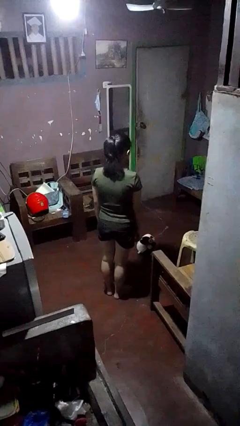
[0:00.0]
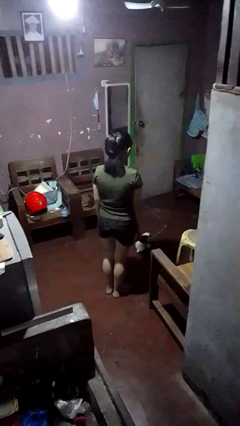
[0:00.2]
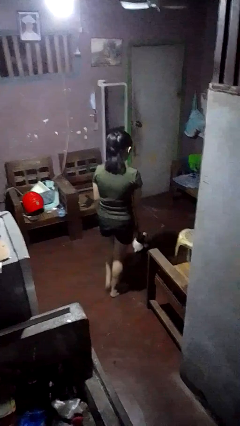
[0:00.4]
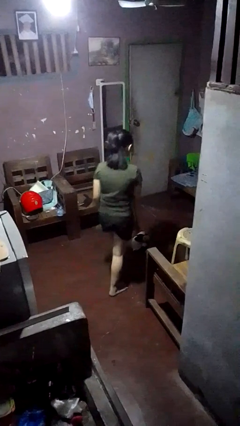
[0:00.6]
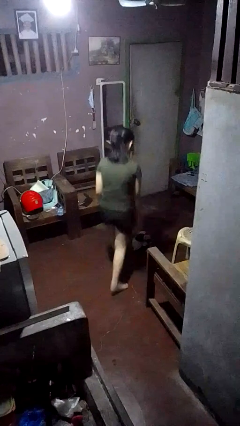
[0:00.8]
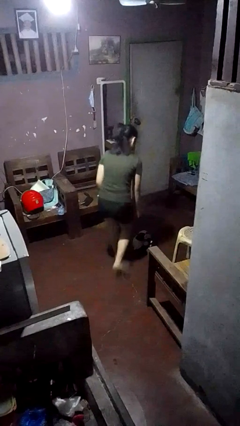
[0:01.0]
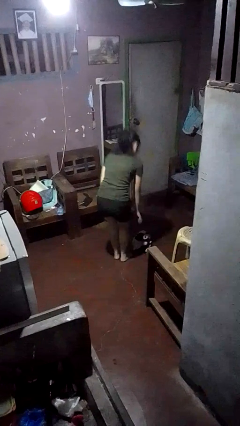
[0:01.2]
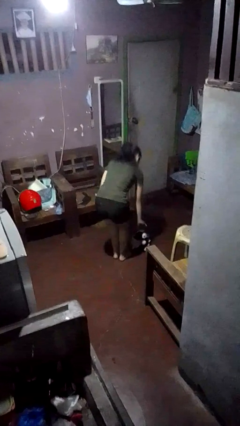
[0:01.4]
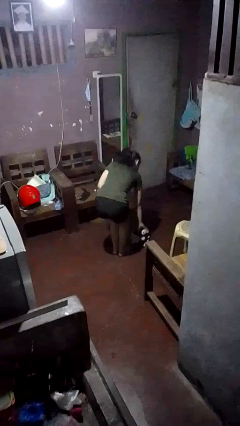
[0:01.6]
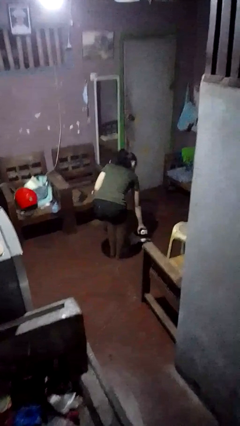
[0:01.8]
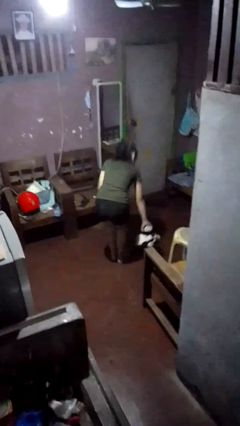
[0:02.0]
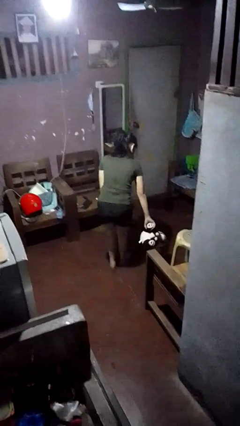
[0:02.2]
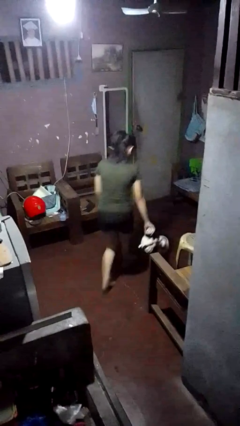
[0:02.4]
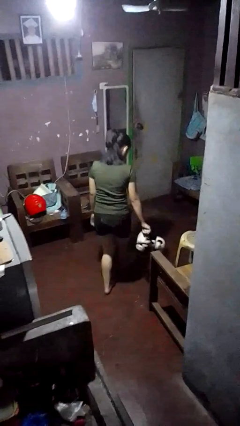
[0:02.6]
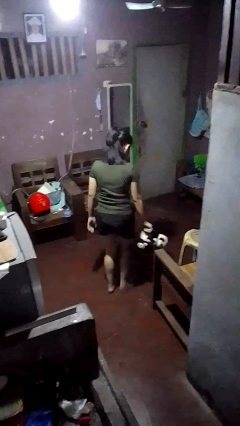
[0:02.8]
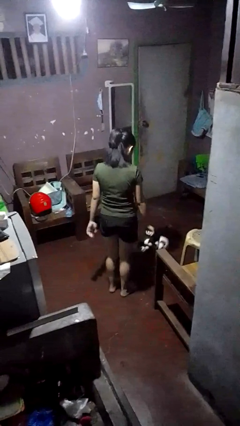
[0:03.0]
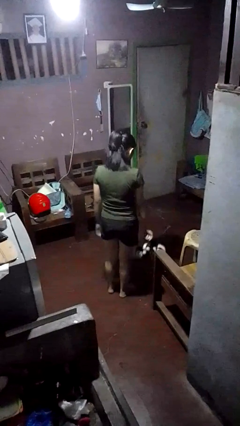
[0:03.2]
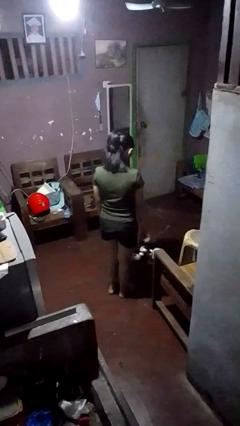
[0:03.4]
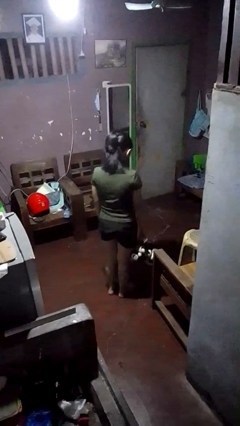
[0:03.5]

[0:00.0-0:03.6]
person picks up object from floor

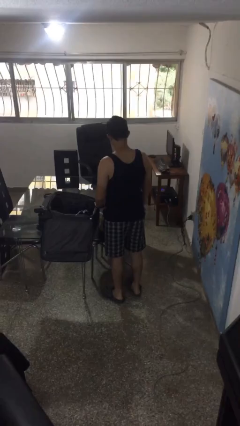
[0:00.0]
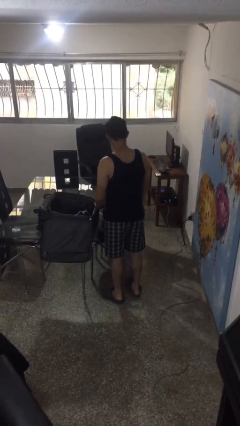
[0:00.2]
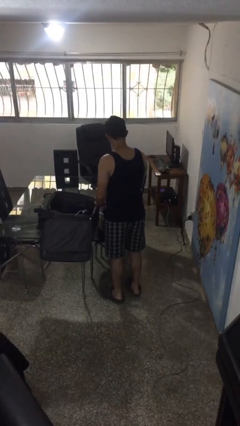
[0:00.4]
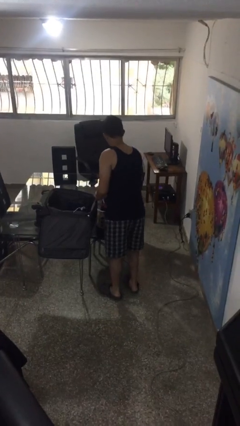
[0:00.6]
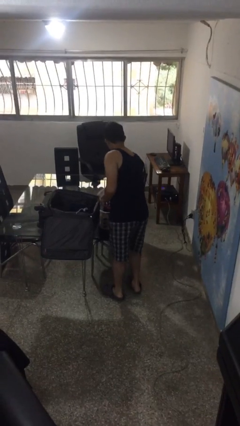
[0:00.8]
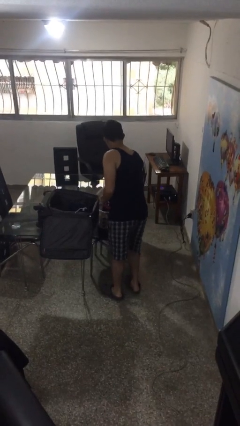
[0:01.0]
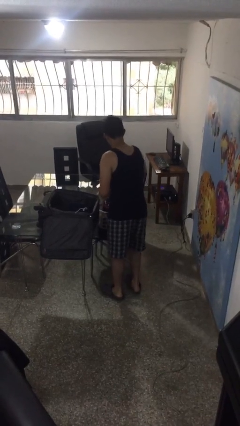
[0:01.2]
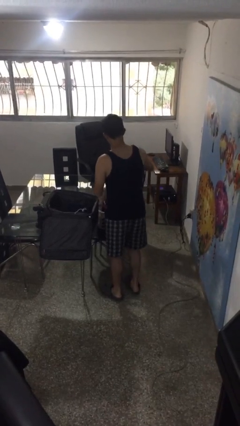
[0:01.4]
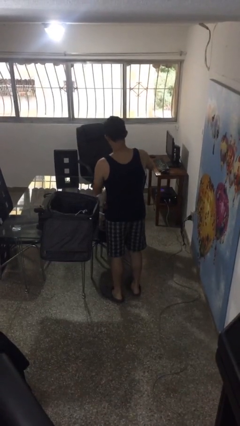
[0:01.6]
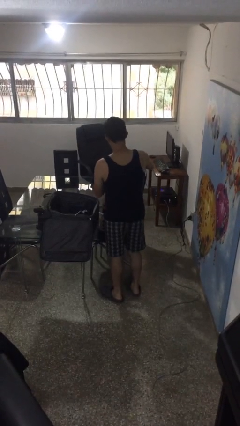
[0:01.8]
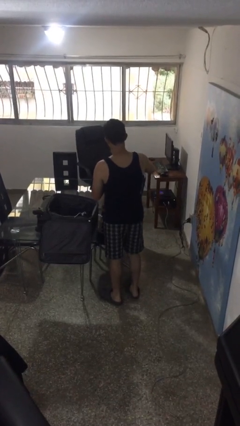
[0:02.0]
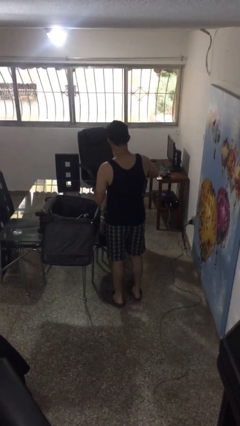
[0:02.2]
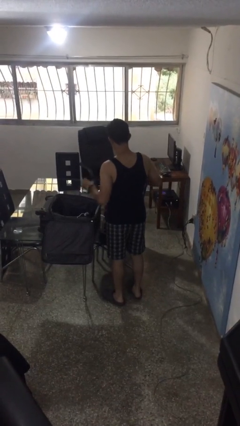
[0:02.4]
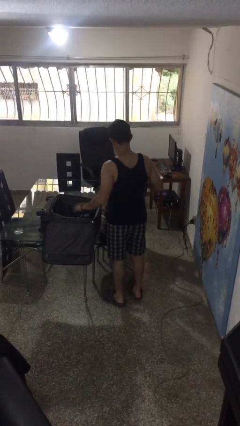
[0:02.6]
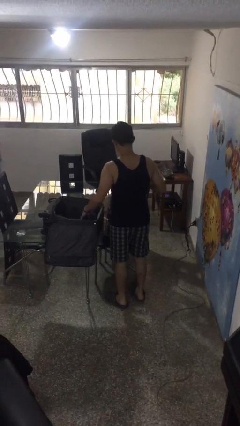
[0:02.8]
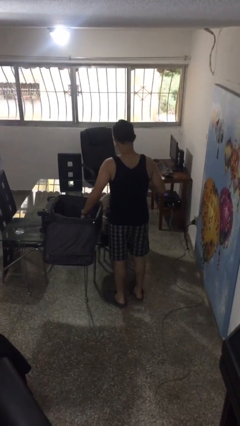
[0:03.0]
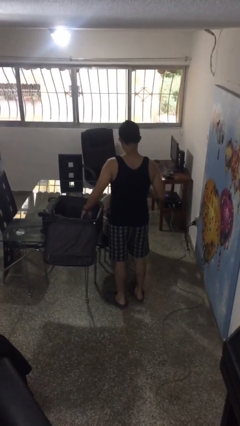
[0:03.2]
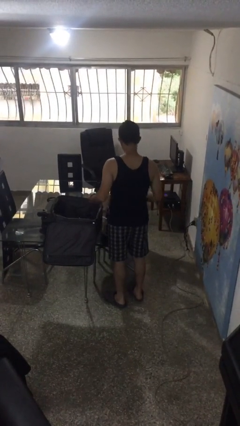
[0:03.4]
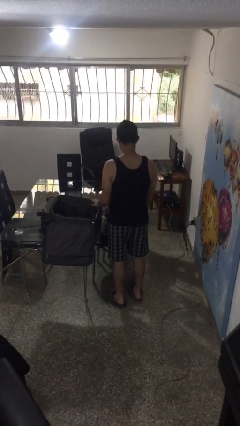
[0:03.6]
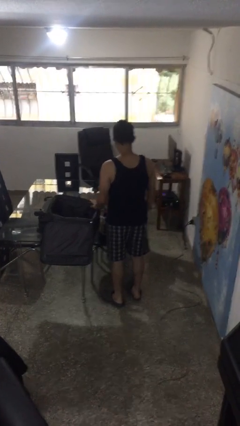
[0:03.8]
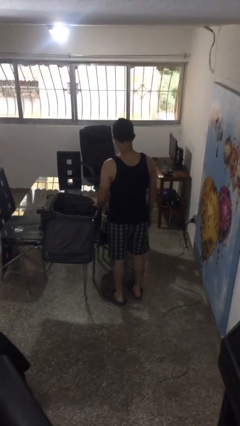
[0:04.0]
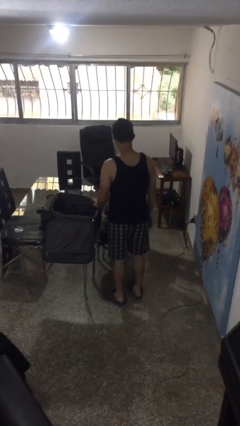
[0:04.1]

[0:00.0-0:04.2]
person loads clothes into suitcase

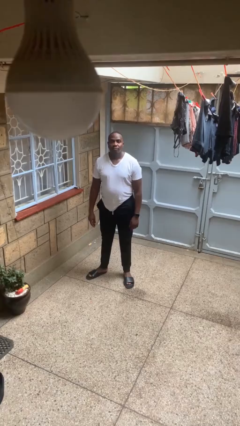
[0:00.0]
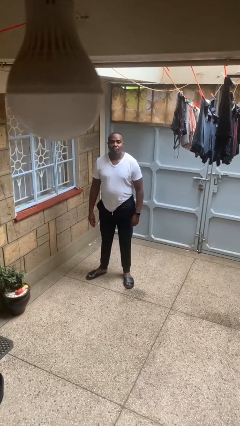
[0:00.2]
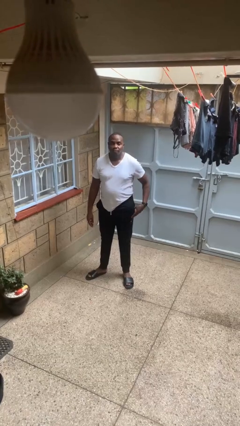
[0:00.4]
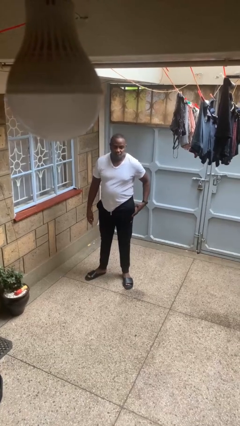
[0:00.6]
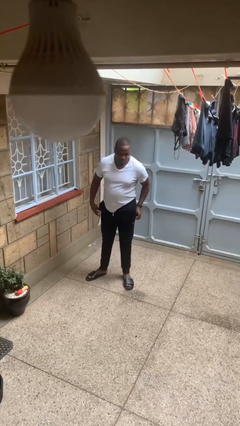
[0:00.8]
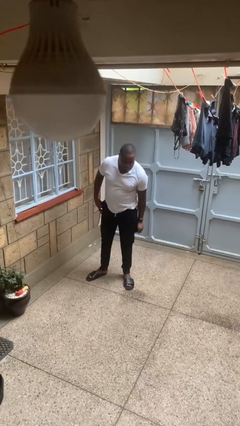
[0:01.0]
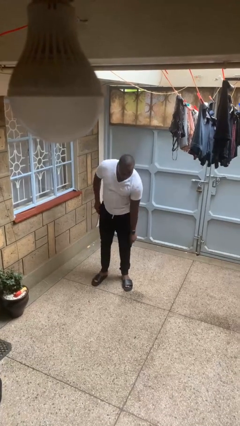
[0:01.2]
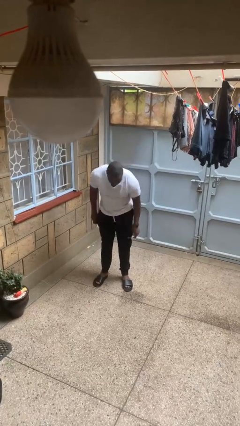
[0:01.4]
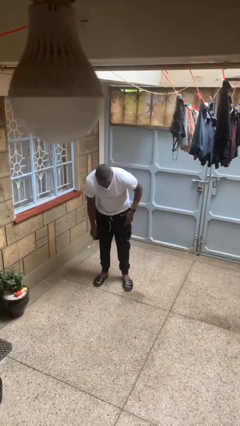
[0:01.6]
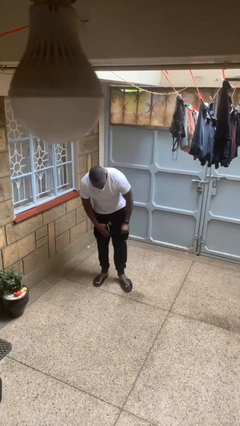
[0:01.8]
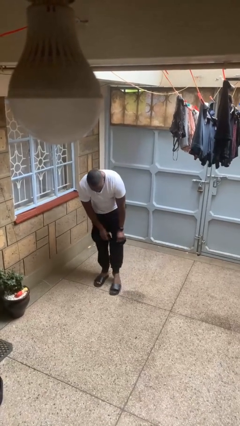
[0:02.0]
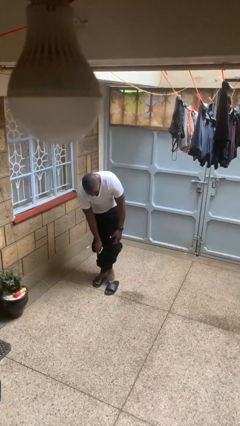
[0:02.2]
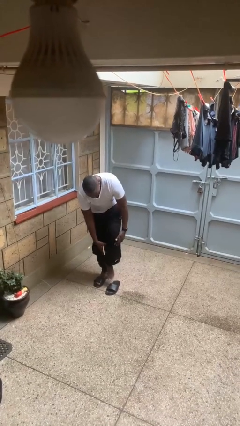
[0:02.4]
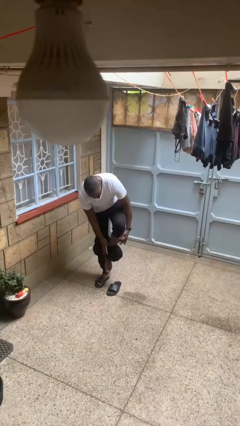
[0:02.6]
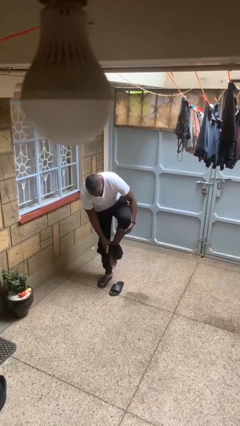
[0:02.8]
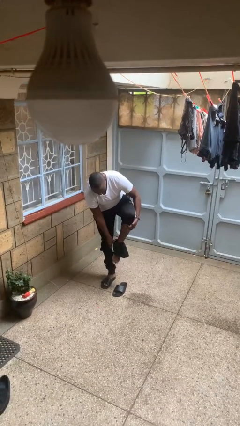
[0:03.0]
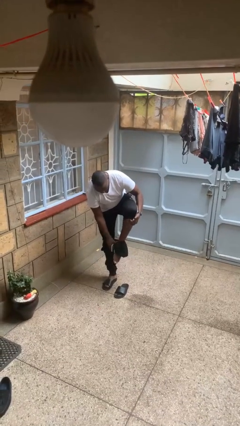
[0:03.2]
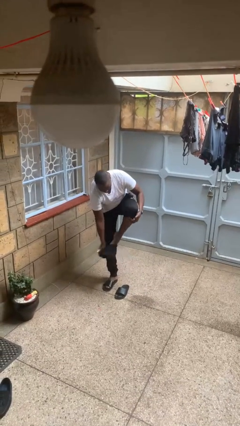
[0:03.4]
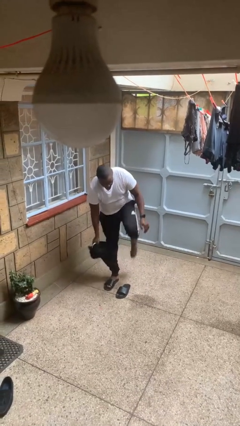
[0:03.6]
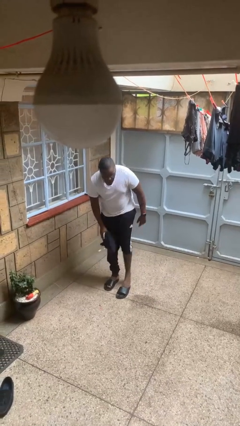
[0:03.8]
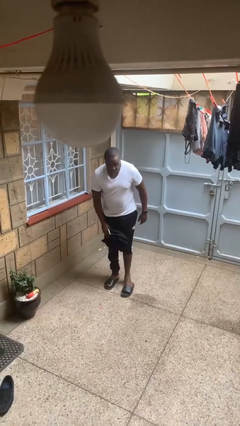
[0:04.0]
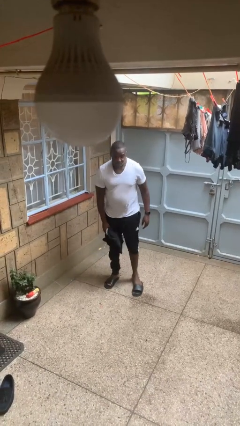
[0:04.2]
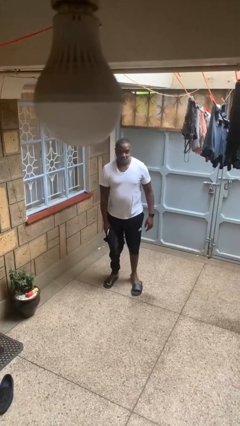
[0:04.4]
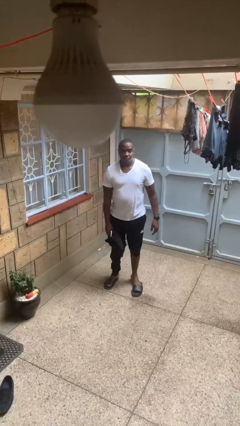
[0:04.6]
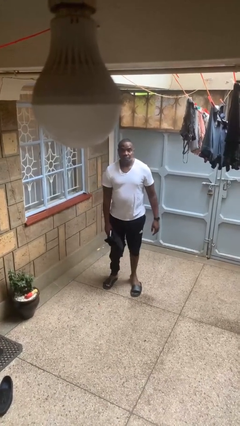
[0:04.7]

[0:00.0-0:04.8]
person takes off pants

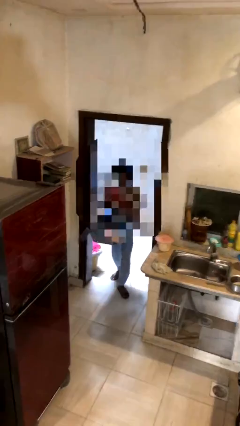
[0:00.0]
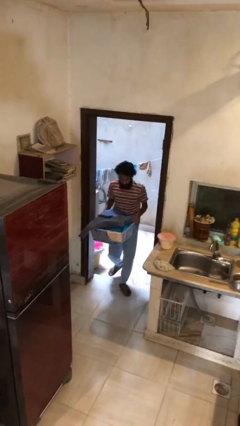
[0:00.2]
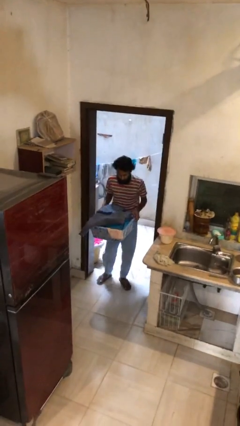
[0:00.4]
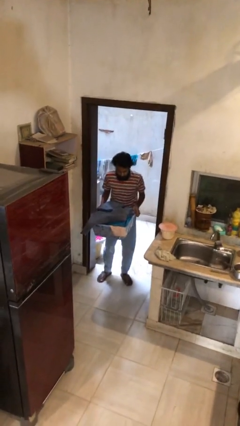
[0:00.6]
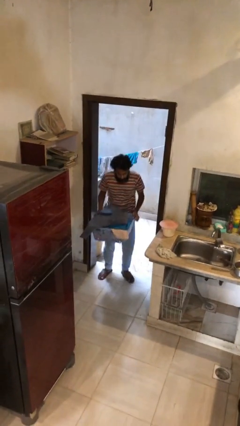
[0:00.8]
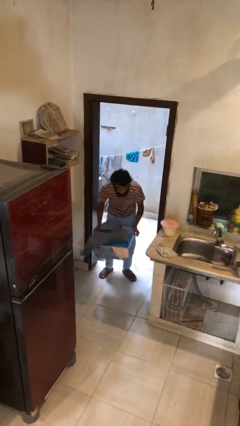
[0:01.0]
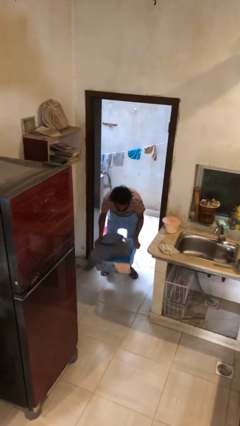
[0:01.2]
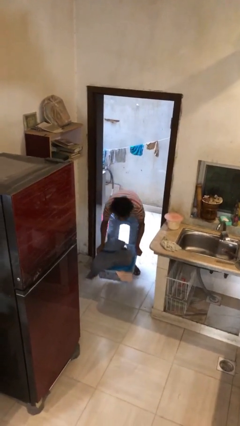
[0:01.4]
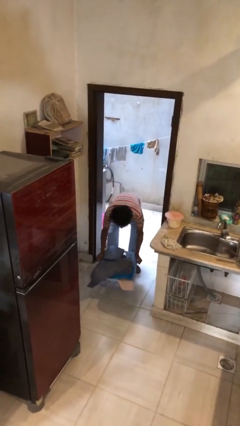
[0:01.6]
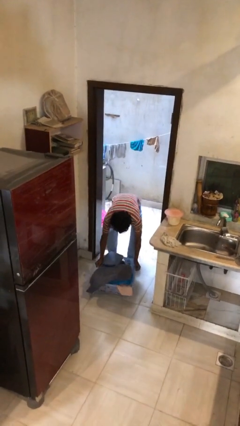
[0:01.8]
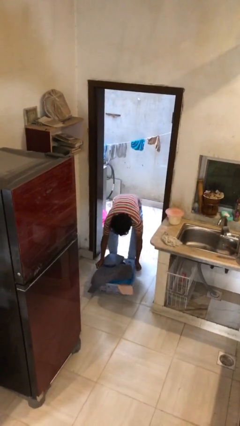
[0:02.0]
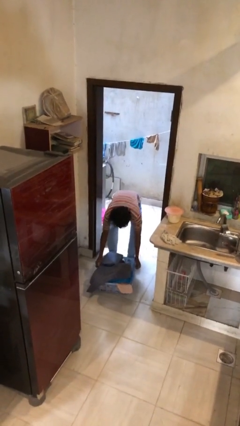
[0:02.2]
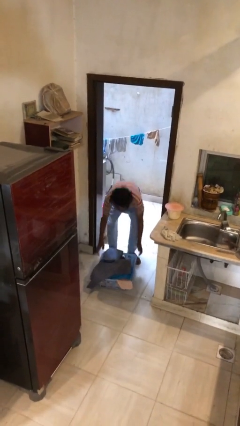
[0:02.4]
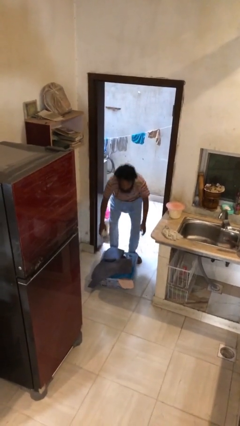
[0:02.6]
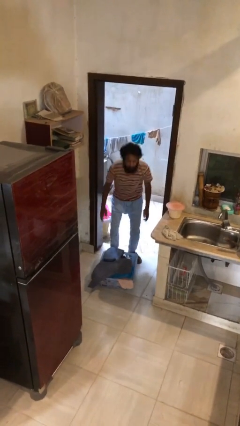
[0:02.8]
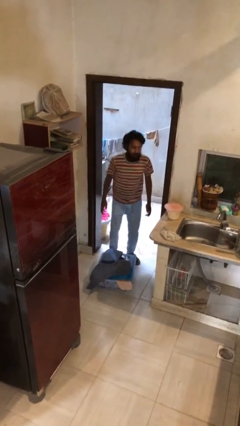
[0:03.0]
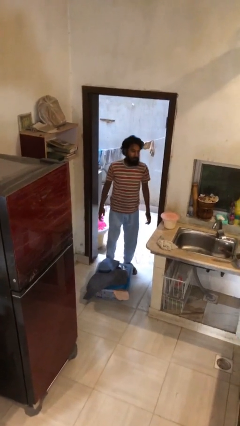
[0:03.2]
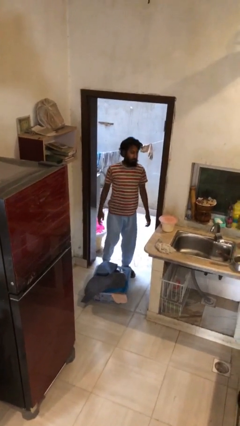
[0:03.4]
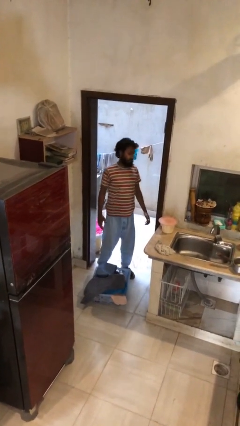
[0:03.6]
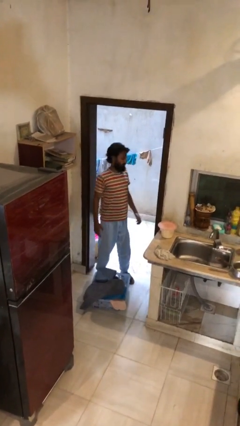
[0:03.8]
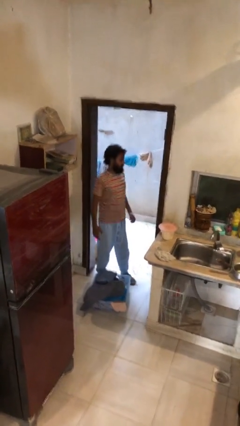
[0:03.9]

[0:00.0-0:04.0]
person puts down object on floor

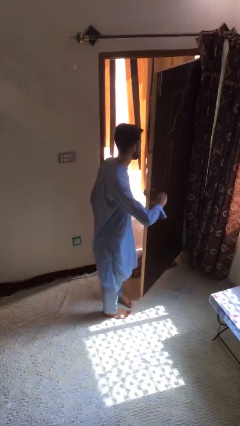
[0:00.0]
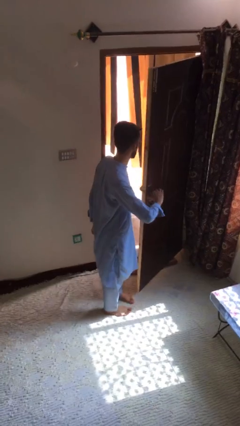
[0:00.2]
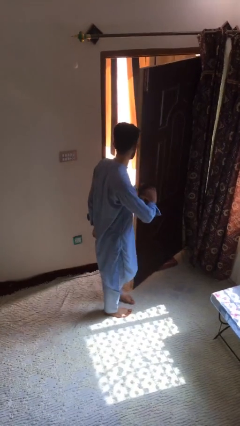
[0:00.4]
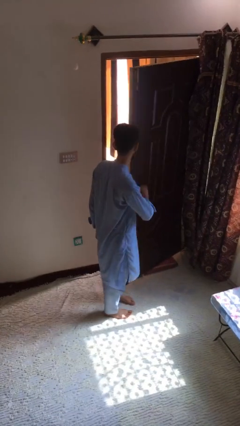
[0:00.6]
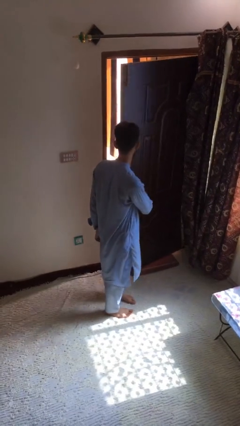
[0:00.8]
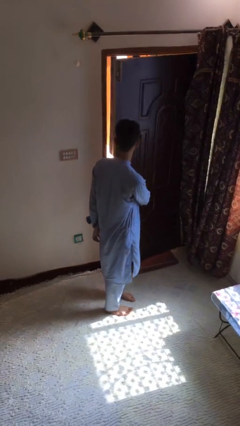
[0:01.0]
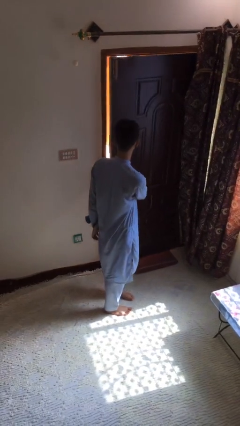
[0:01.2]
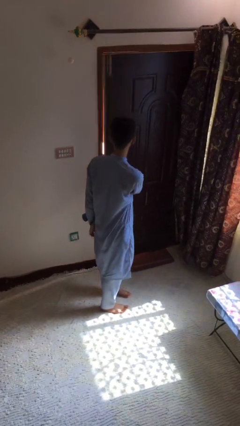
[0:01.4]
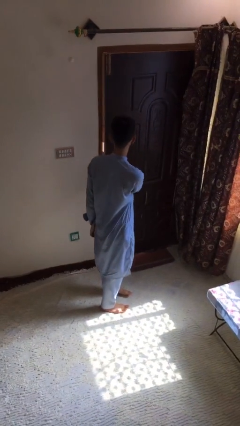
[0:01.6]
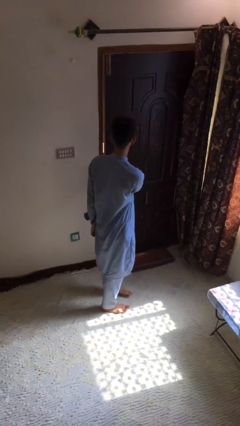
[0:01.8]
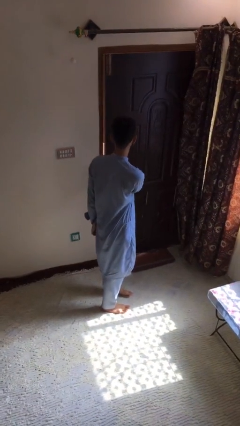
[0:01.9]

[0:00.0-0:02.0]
person closes facility door
